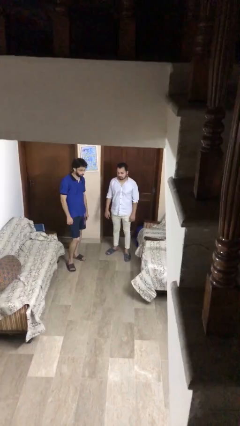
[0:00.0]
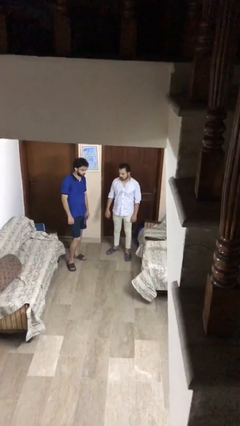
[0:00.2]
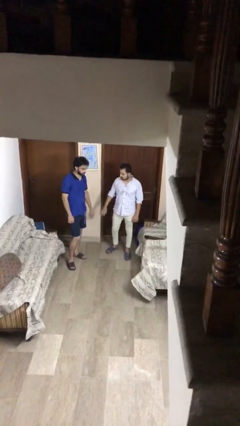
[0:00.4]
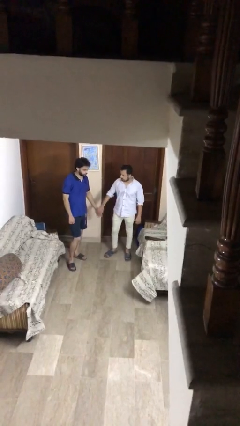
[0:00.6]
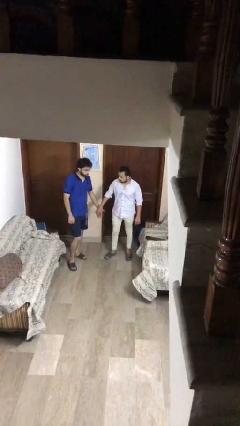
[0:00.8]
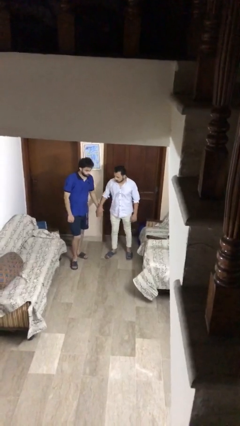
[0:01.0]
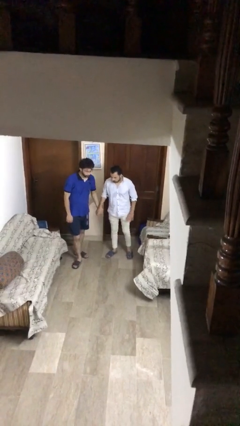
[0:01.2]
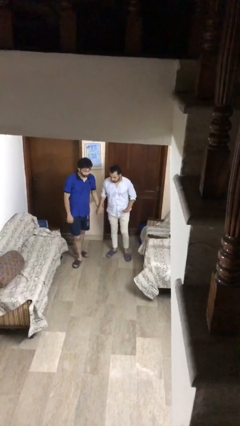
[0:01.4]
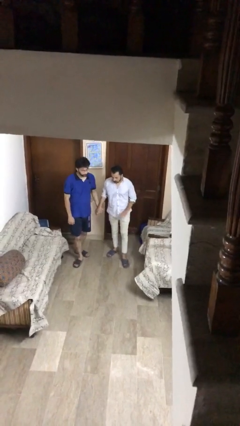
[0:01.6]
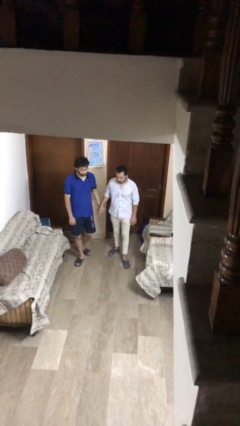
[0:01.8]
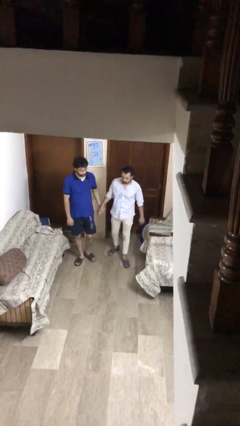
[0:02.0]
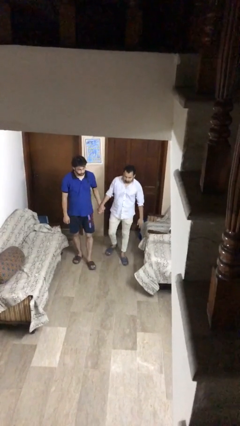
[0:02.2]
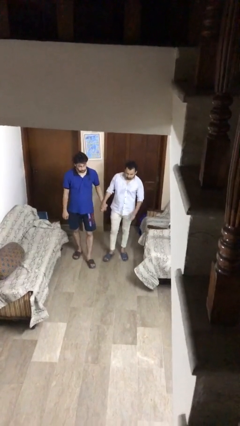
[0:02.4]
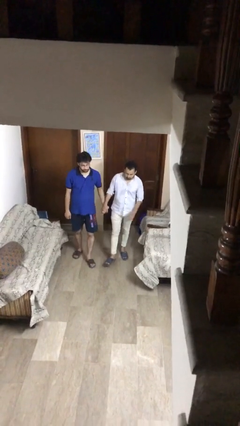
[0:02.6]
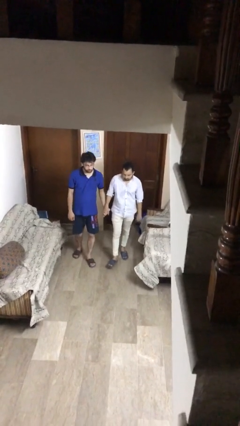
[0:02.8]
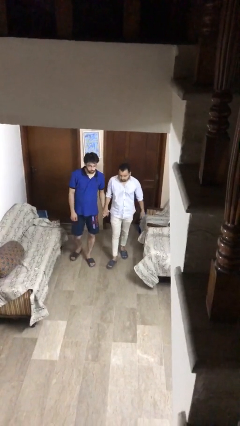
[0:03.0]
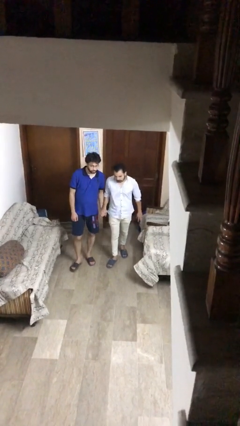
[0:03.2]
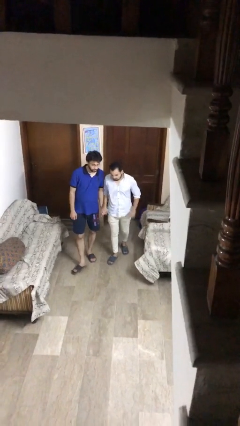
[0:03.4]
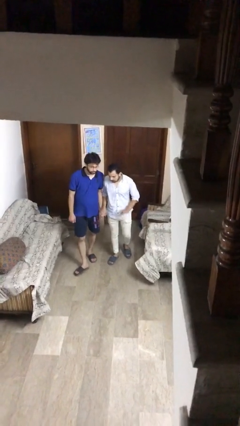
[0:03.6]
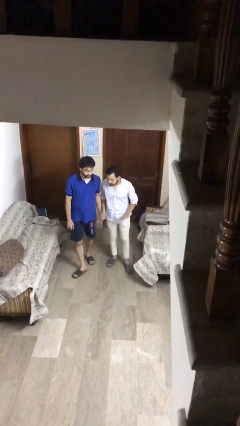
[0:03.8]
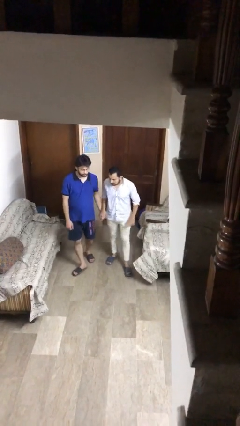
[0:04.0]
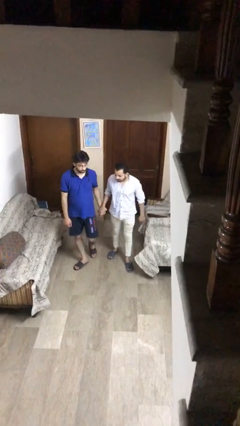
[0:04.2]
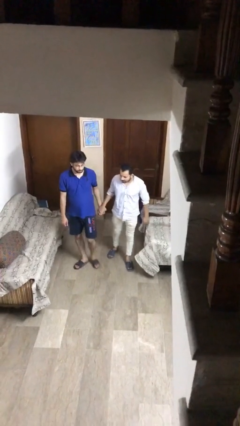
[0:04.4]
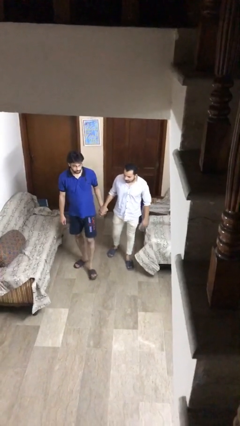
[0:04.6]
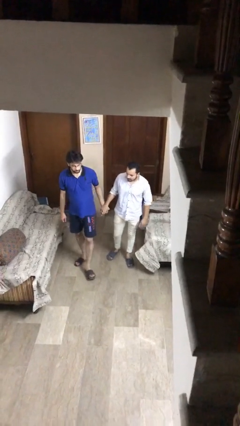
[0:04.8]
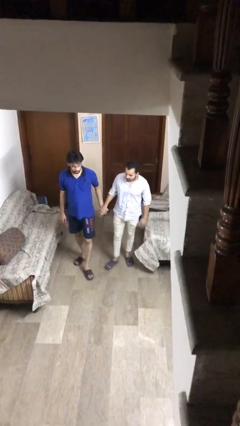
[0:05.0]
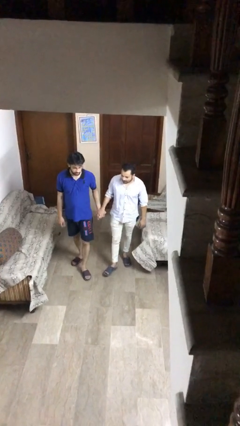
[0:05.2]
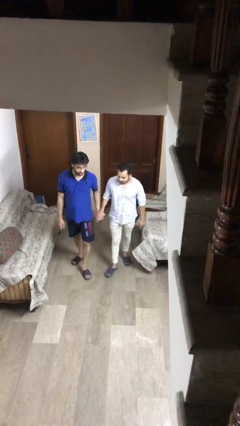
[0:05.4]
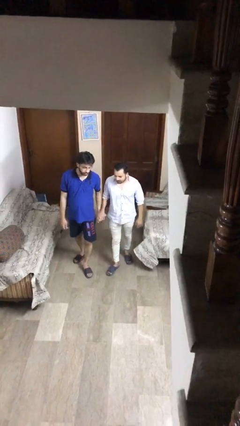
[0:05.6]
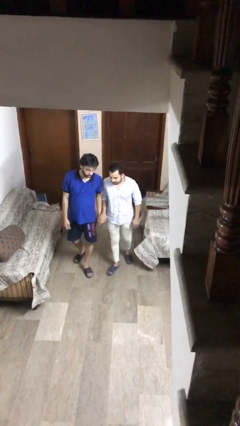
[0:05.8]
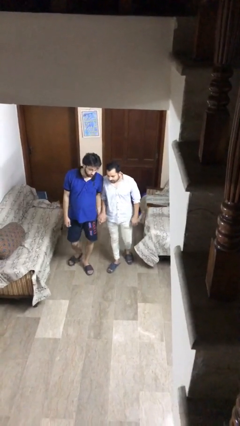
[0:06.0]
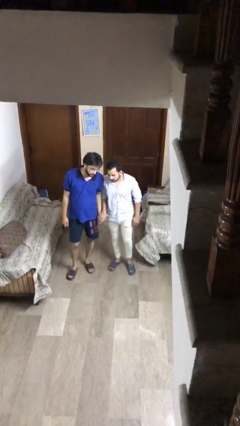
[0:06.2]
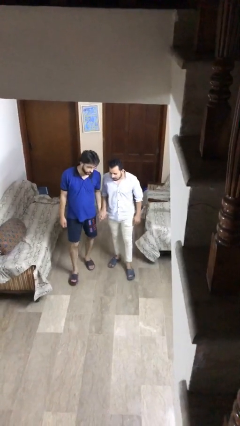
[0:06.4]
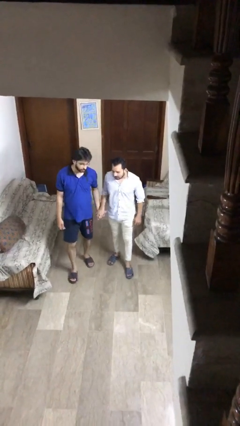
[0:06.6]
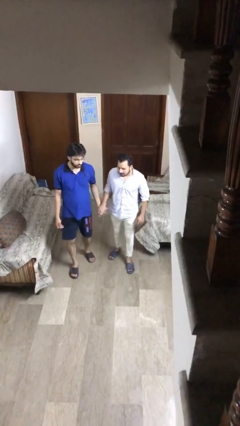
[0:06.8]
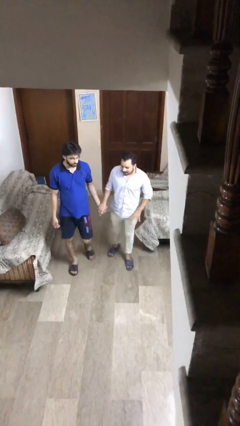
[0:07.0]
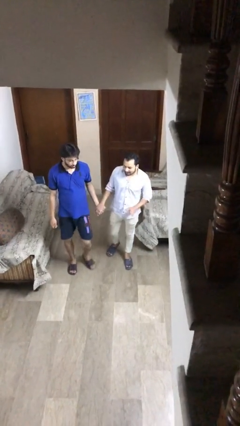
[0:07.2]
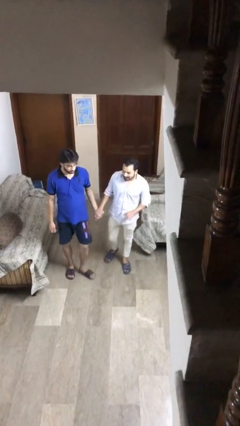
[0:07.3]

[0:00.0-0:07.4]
person holds hand

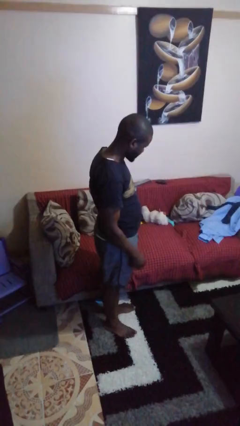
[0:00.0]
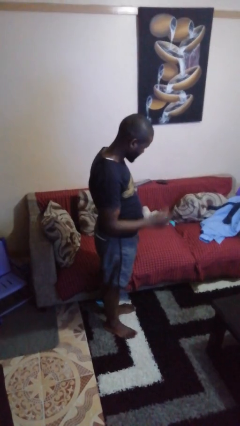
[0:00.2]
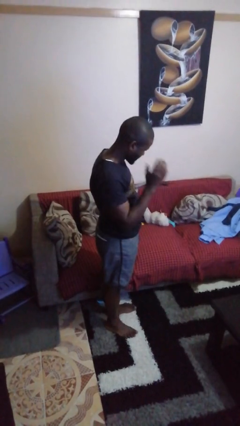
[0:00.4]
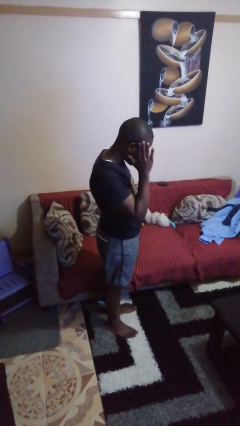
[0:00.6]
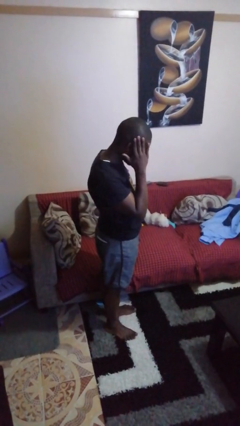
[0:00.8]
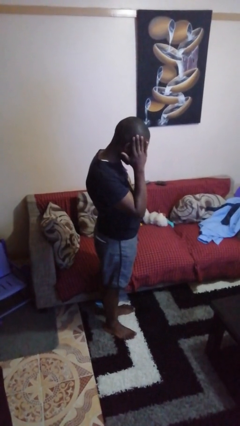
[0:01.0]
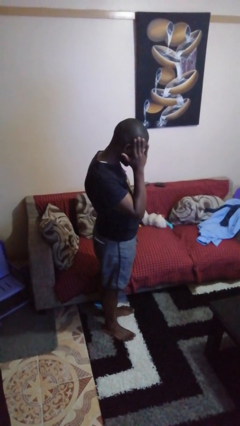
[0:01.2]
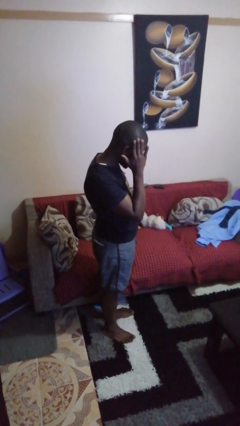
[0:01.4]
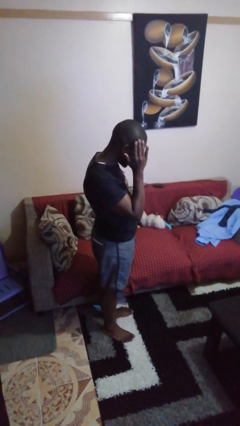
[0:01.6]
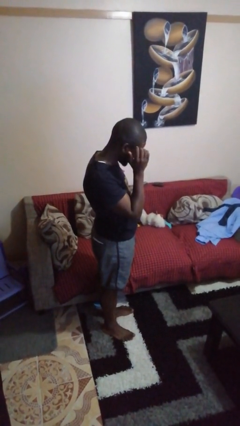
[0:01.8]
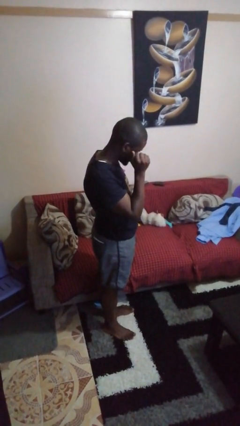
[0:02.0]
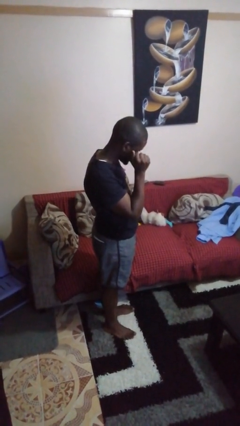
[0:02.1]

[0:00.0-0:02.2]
person pats head

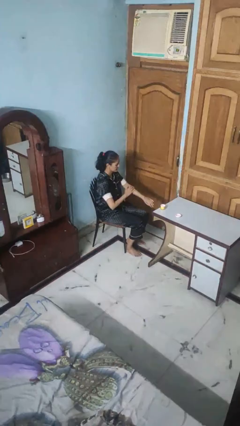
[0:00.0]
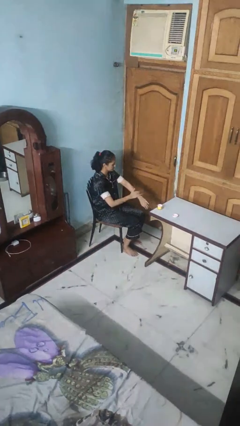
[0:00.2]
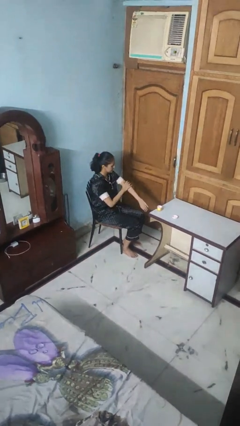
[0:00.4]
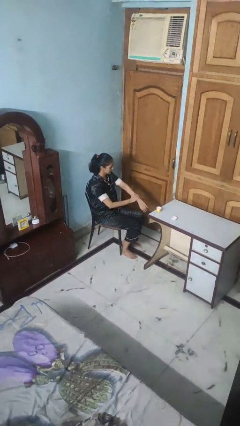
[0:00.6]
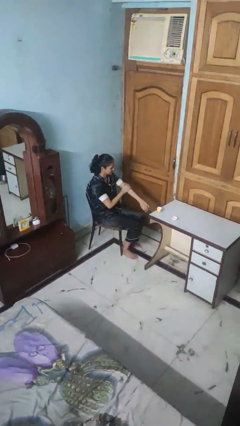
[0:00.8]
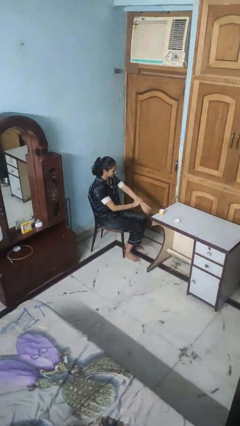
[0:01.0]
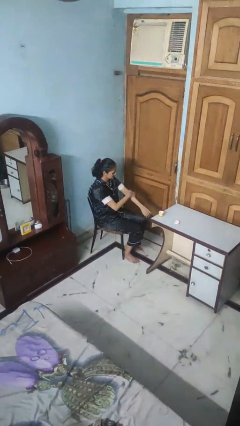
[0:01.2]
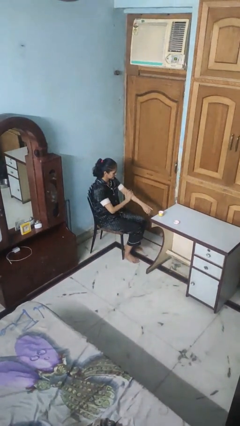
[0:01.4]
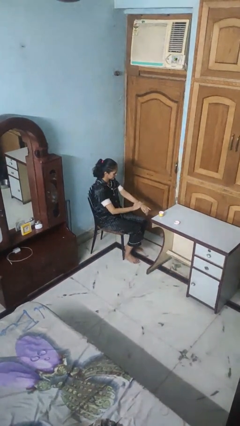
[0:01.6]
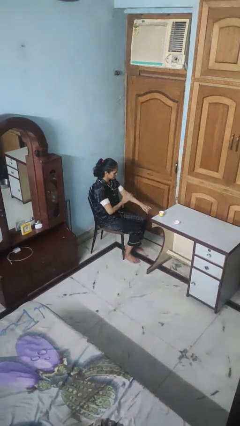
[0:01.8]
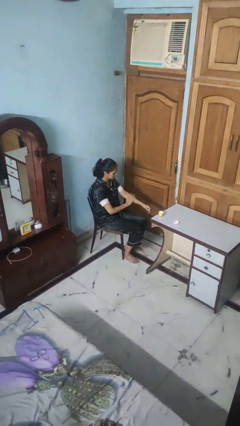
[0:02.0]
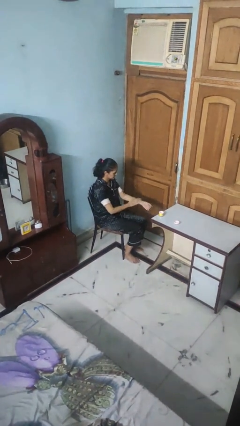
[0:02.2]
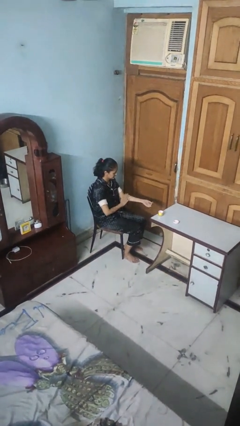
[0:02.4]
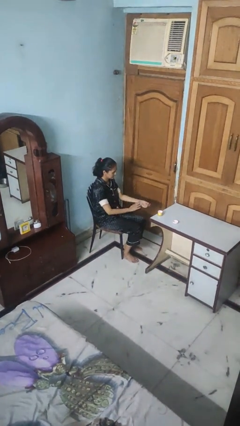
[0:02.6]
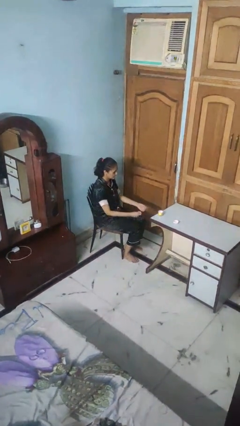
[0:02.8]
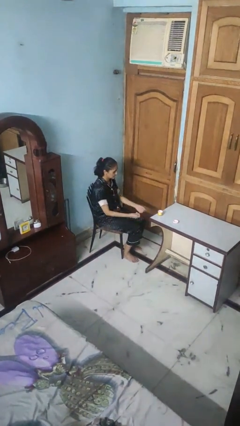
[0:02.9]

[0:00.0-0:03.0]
person applies sunscreen

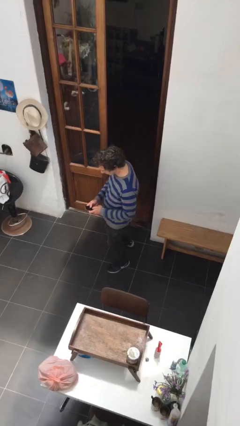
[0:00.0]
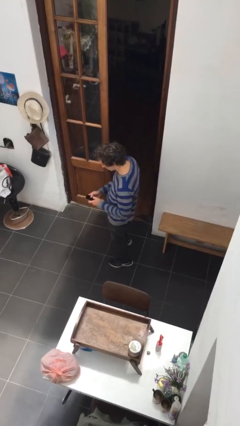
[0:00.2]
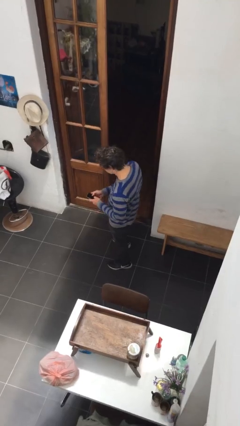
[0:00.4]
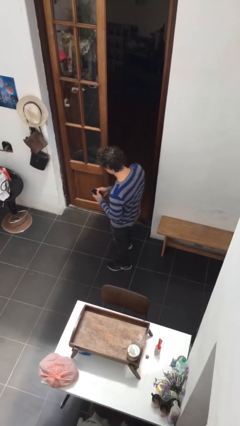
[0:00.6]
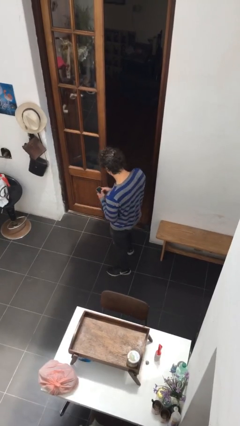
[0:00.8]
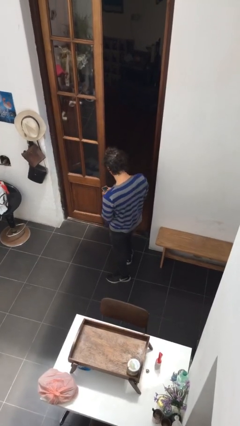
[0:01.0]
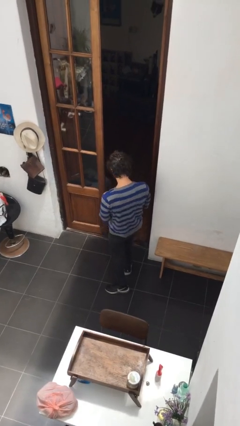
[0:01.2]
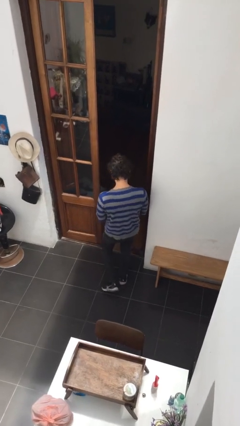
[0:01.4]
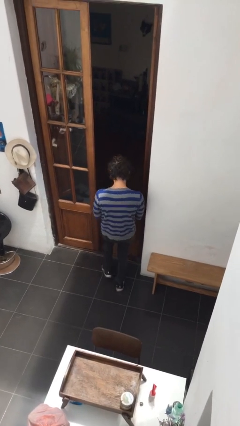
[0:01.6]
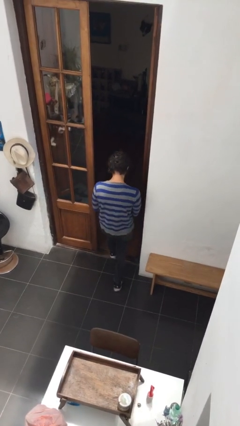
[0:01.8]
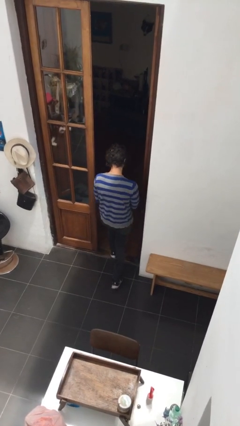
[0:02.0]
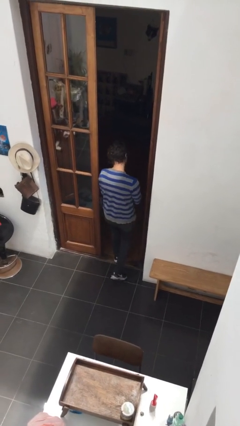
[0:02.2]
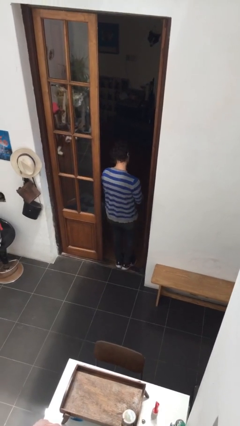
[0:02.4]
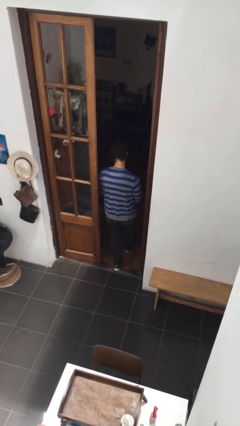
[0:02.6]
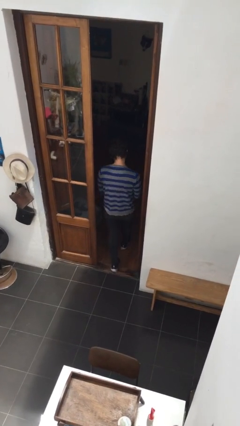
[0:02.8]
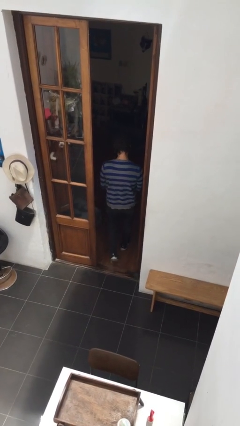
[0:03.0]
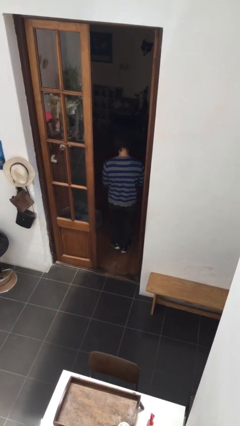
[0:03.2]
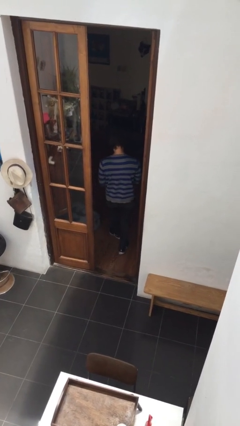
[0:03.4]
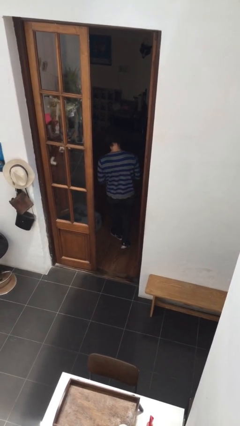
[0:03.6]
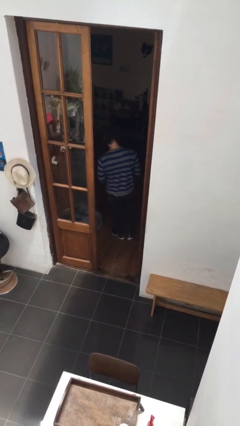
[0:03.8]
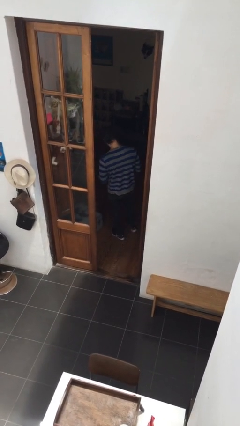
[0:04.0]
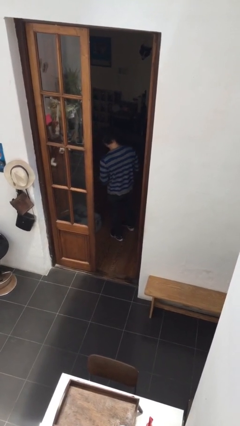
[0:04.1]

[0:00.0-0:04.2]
person exits scene through structure

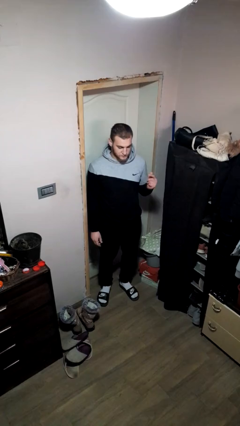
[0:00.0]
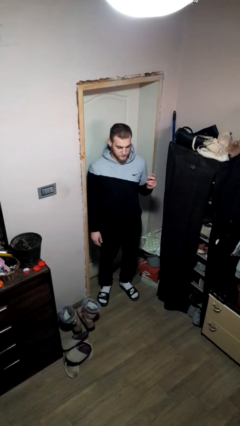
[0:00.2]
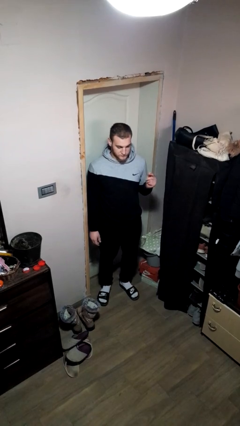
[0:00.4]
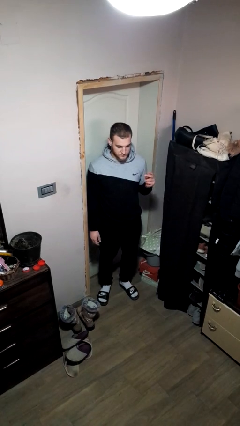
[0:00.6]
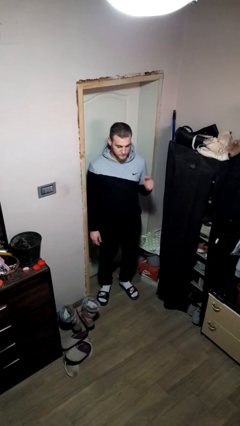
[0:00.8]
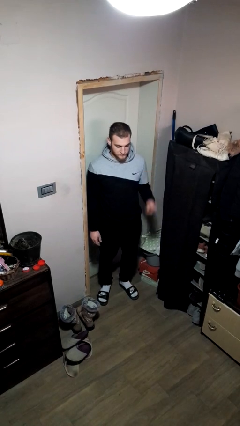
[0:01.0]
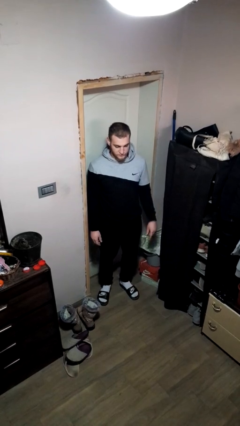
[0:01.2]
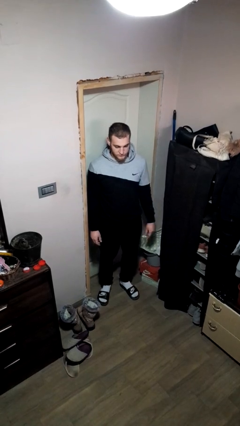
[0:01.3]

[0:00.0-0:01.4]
person snaps fingers
